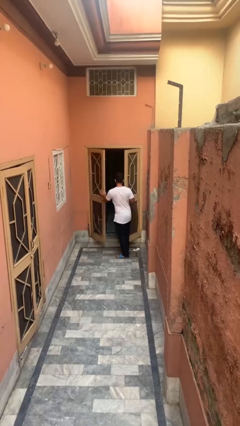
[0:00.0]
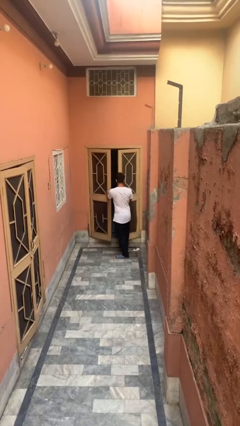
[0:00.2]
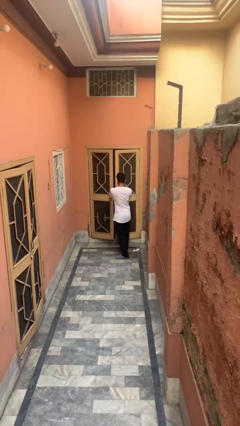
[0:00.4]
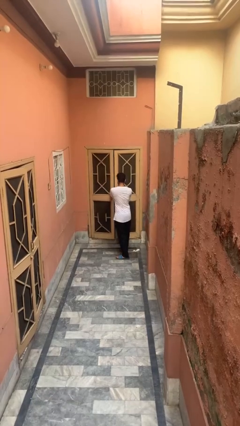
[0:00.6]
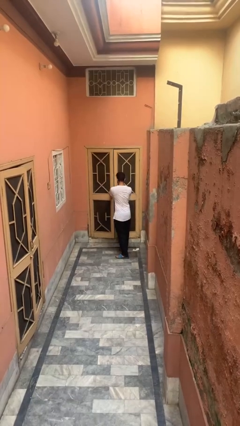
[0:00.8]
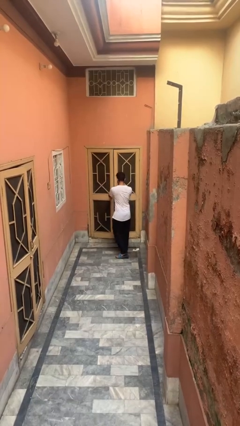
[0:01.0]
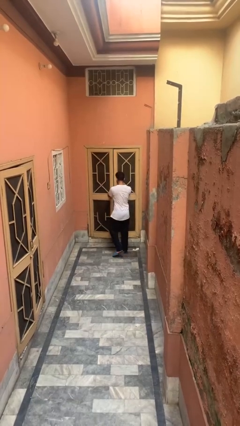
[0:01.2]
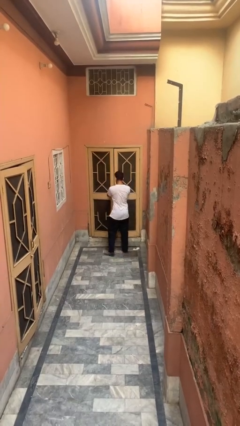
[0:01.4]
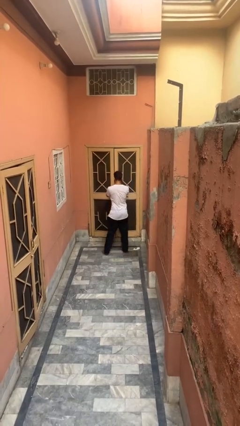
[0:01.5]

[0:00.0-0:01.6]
person closes gate

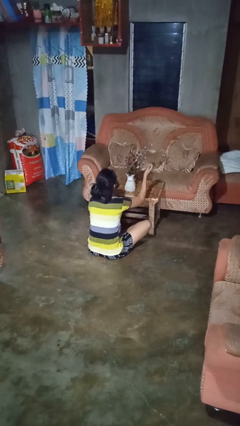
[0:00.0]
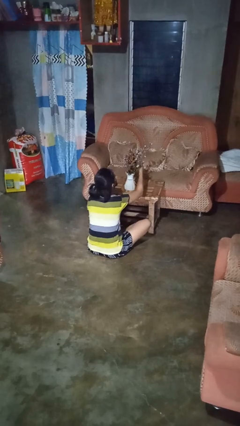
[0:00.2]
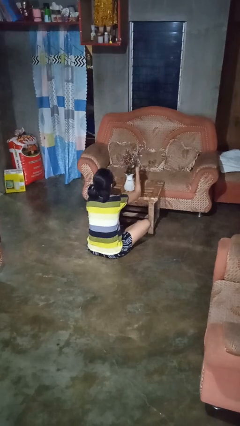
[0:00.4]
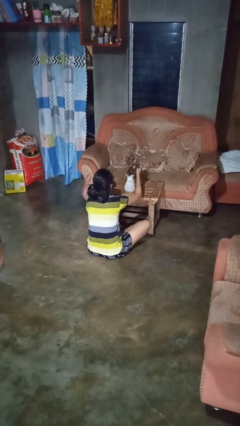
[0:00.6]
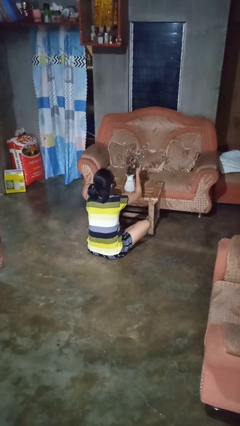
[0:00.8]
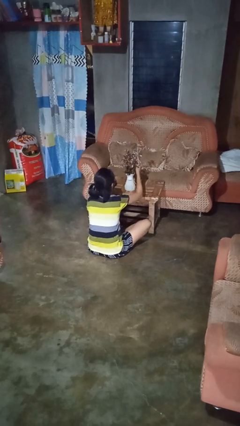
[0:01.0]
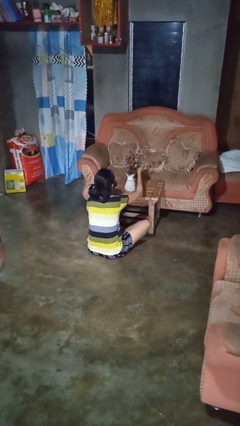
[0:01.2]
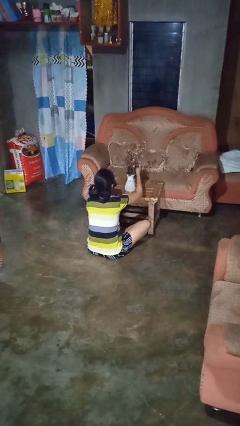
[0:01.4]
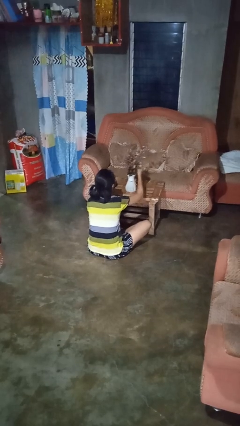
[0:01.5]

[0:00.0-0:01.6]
person arranges flowers in vase

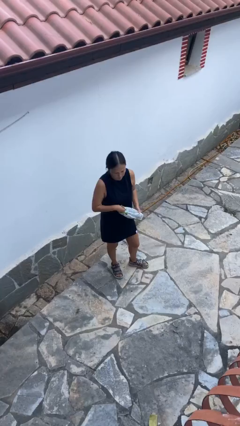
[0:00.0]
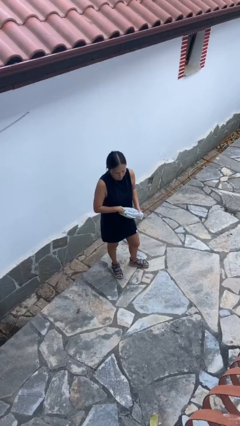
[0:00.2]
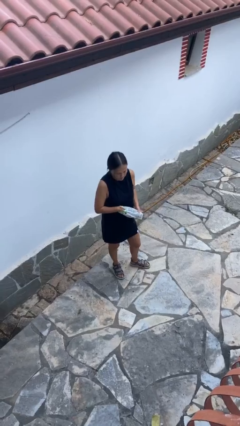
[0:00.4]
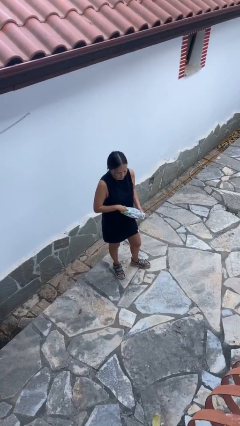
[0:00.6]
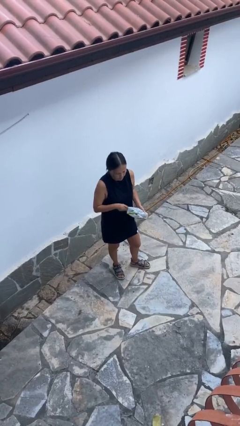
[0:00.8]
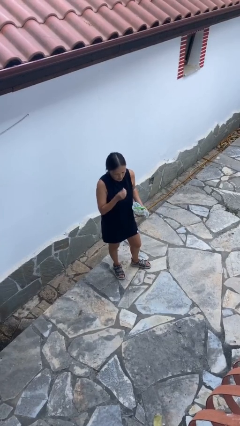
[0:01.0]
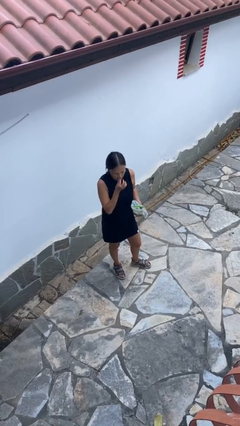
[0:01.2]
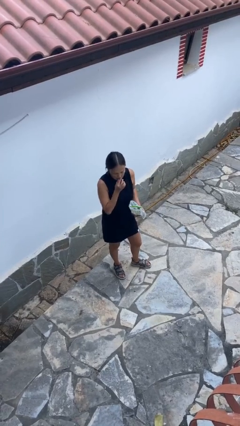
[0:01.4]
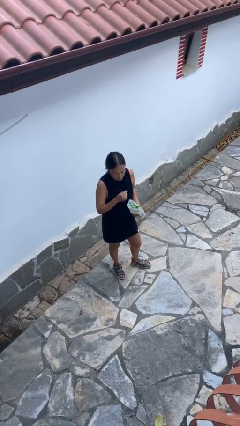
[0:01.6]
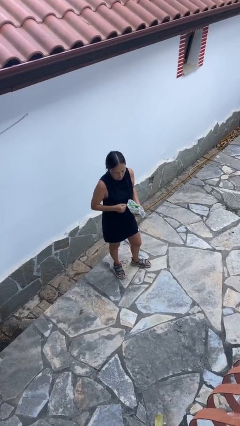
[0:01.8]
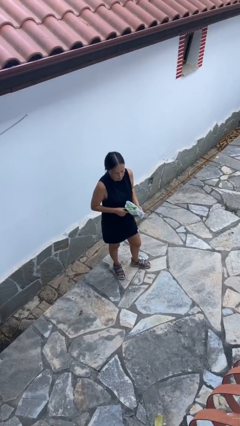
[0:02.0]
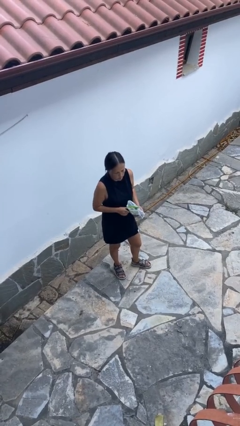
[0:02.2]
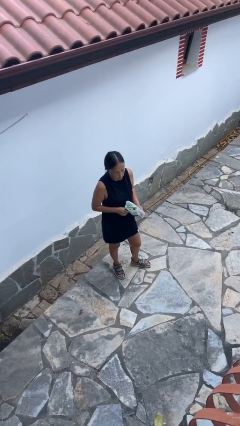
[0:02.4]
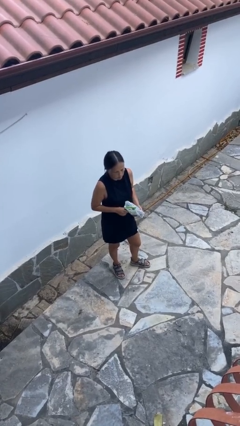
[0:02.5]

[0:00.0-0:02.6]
person eats snack from bag

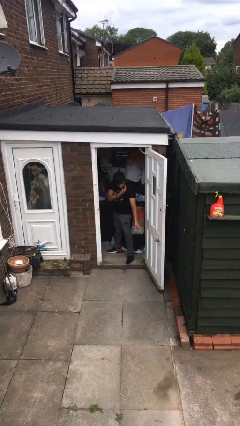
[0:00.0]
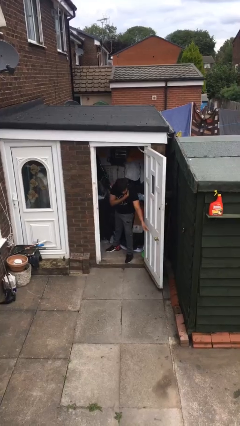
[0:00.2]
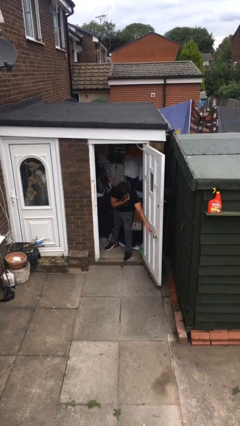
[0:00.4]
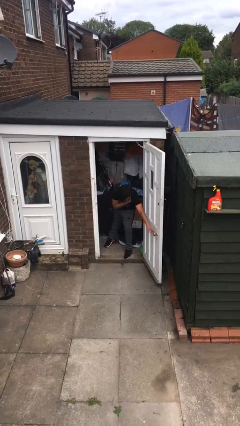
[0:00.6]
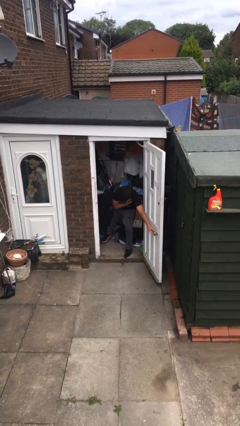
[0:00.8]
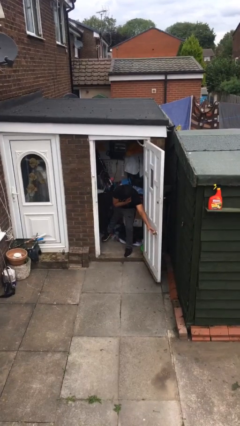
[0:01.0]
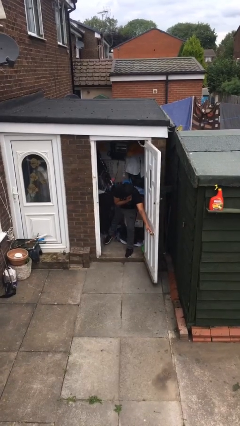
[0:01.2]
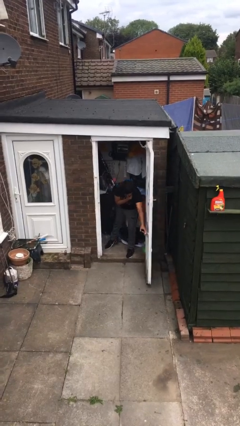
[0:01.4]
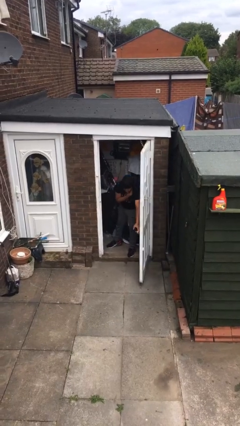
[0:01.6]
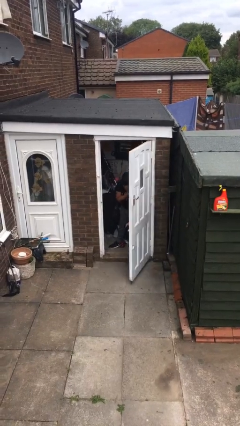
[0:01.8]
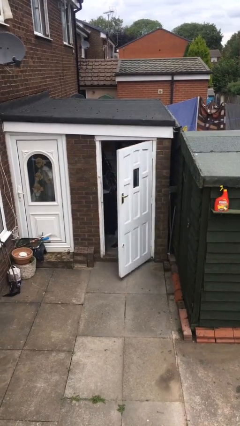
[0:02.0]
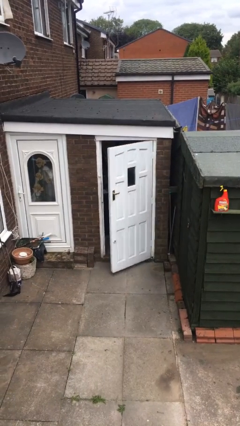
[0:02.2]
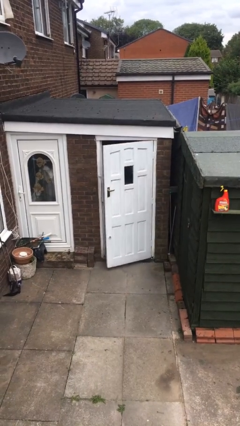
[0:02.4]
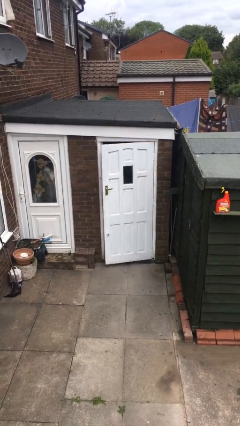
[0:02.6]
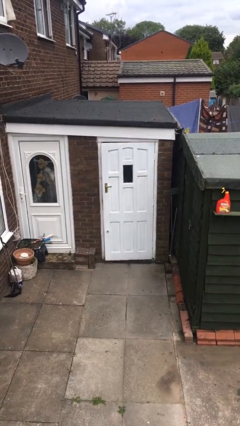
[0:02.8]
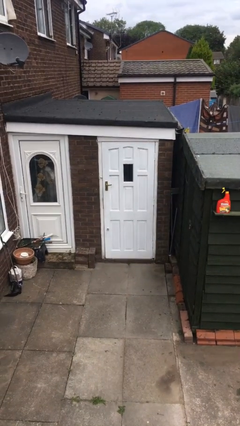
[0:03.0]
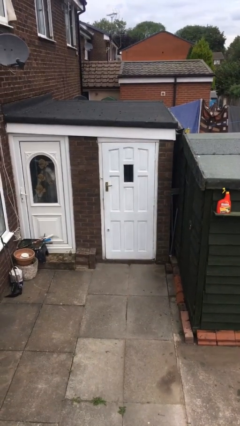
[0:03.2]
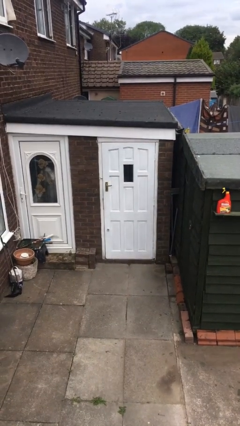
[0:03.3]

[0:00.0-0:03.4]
person closes facility door

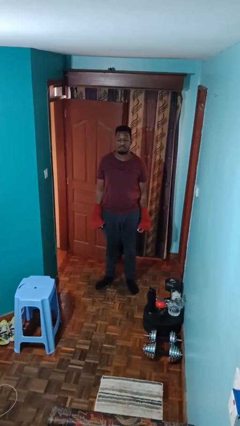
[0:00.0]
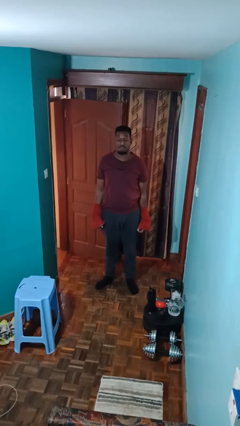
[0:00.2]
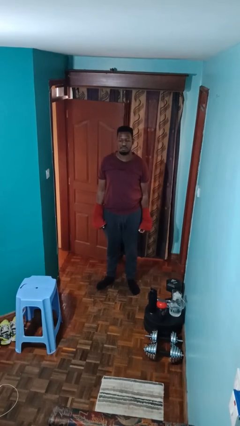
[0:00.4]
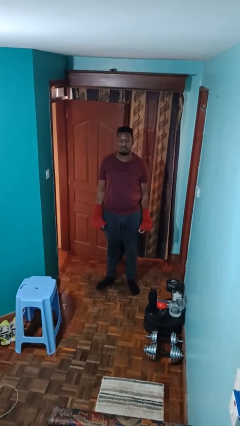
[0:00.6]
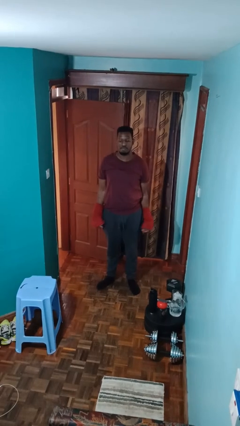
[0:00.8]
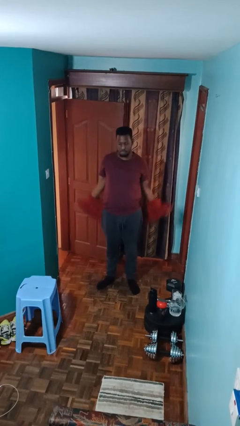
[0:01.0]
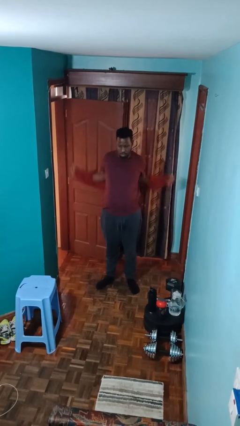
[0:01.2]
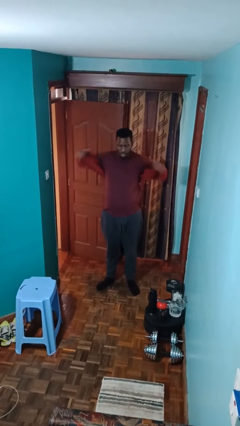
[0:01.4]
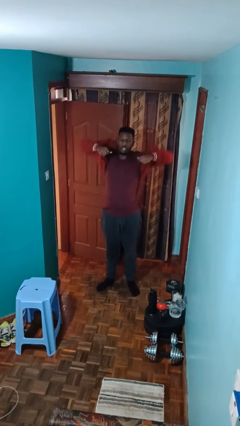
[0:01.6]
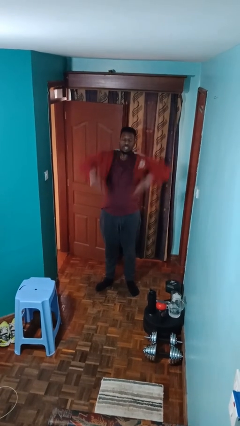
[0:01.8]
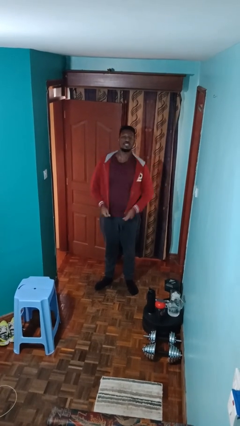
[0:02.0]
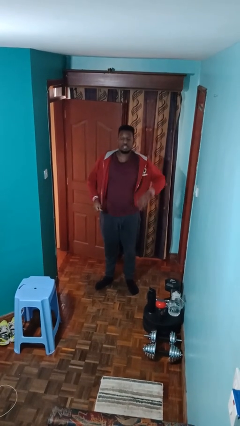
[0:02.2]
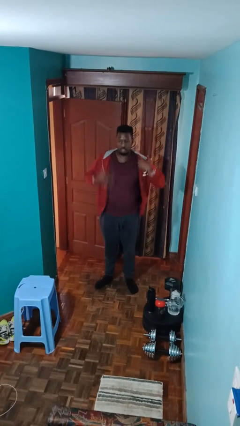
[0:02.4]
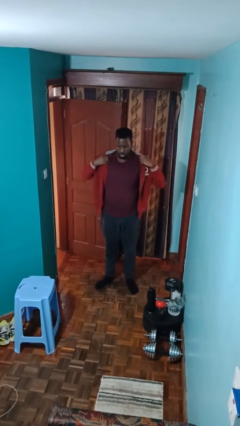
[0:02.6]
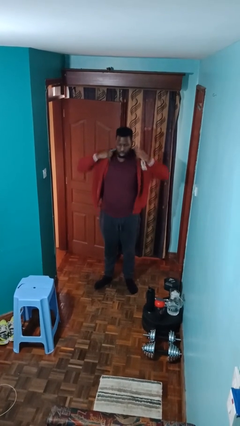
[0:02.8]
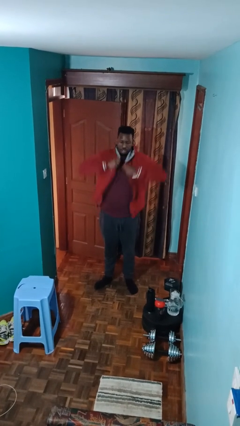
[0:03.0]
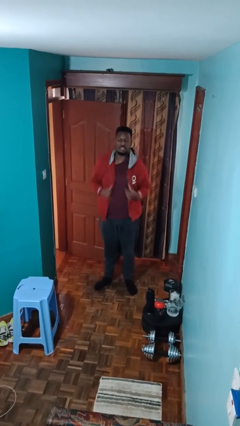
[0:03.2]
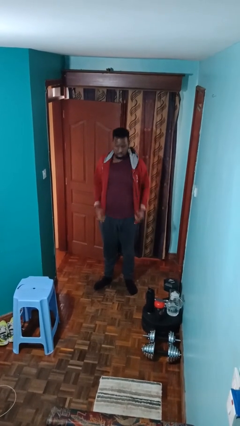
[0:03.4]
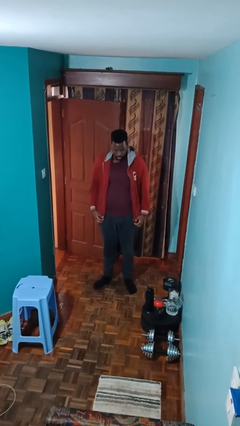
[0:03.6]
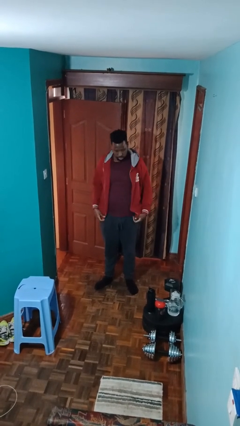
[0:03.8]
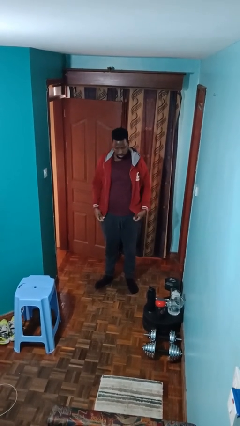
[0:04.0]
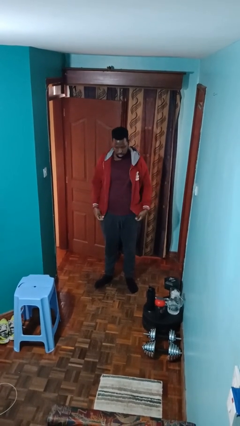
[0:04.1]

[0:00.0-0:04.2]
person puts on jacket

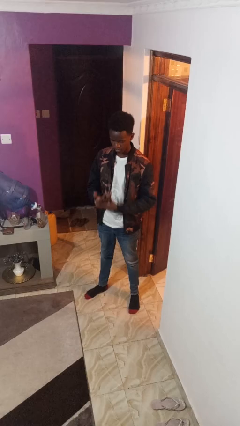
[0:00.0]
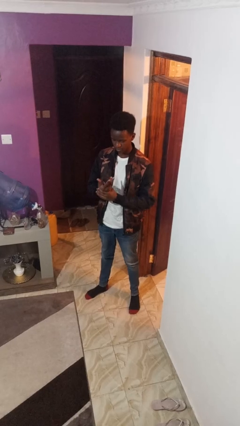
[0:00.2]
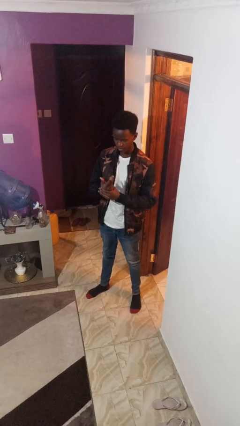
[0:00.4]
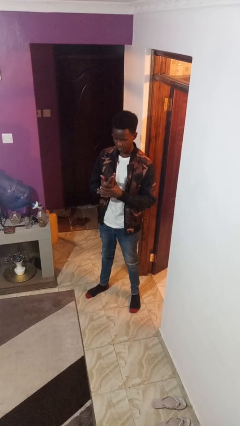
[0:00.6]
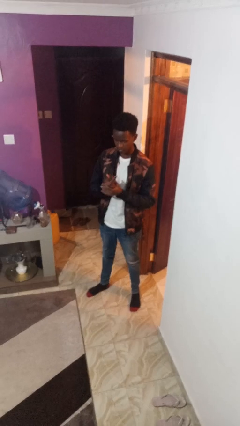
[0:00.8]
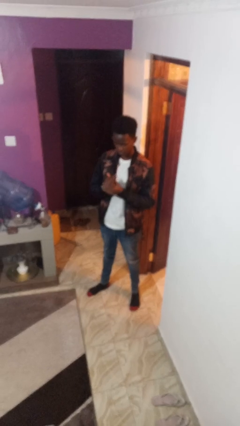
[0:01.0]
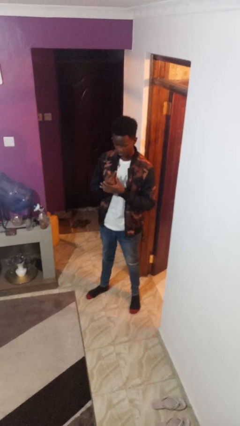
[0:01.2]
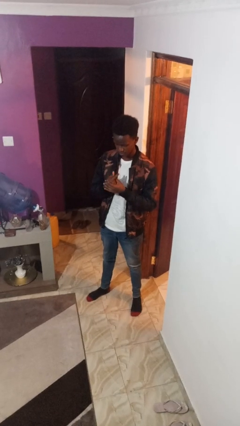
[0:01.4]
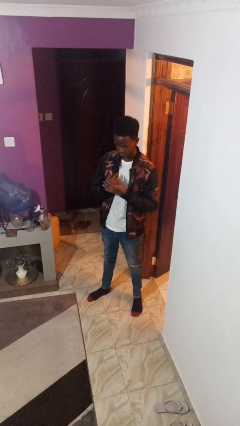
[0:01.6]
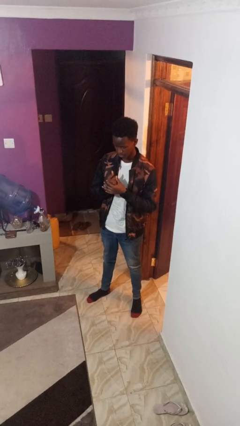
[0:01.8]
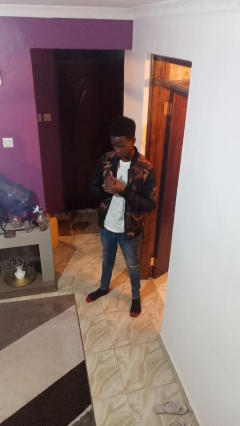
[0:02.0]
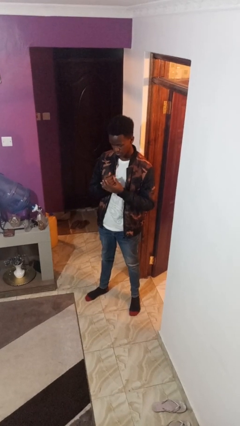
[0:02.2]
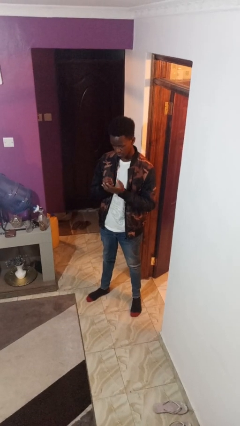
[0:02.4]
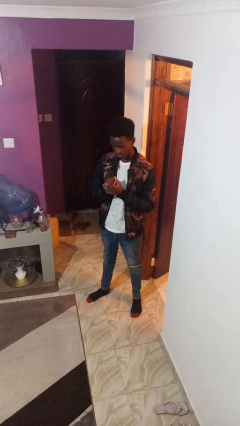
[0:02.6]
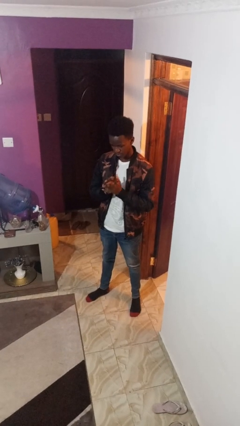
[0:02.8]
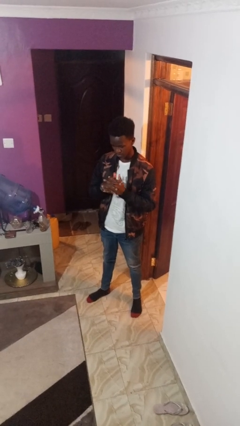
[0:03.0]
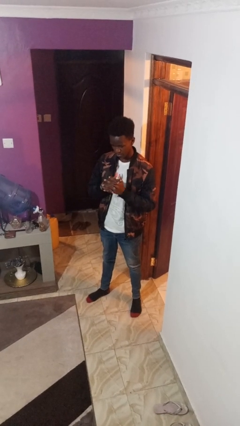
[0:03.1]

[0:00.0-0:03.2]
person cracks knuckles

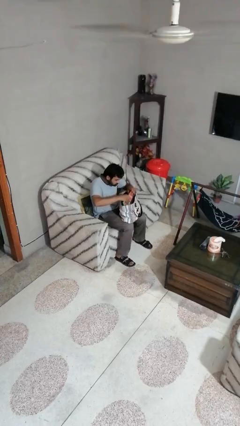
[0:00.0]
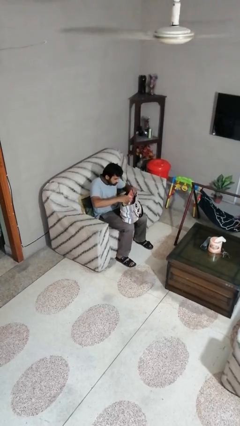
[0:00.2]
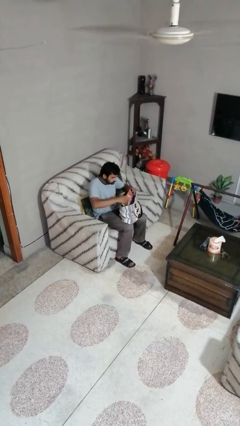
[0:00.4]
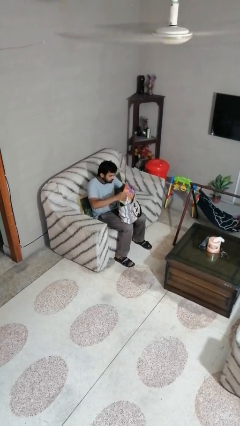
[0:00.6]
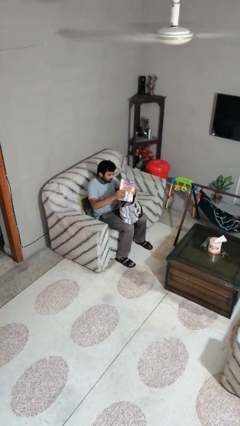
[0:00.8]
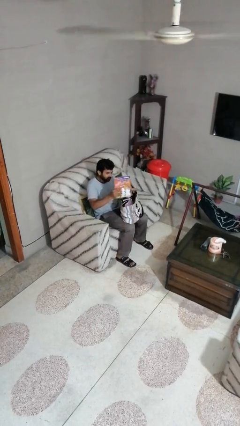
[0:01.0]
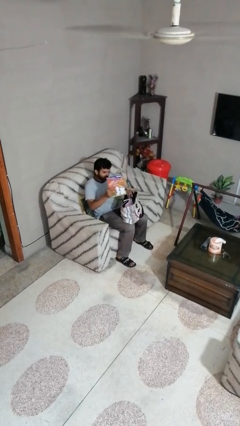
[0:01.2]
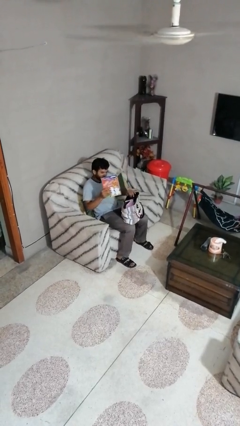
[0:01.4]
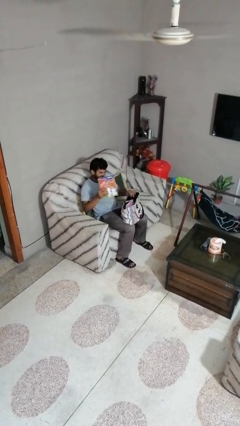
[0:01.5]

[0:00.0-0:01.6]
person takes object from backpack
